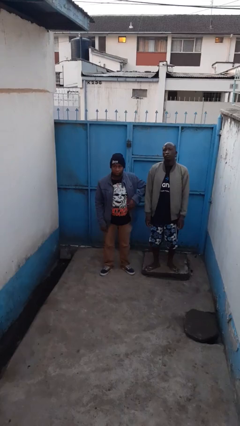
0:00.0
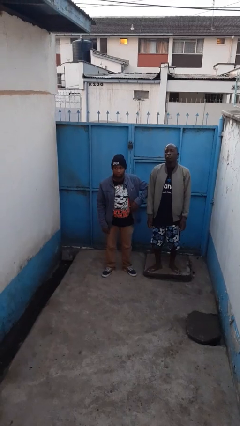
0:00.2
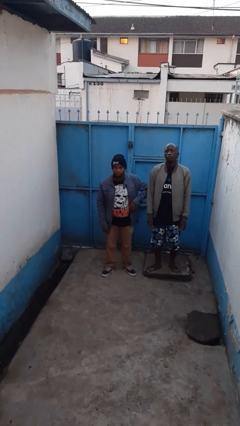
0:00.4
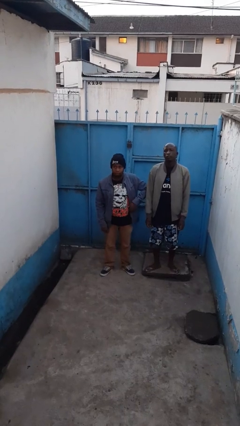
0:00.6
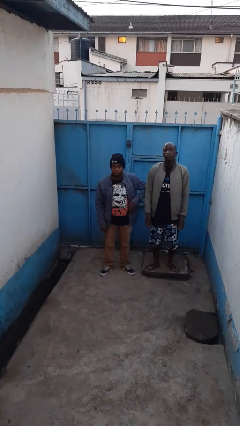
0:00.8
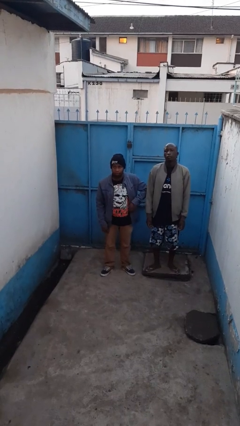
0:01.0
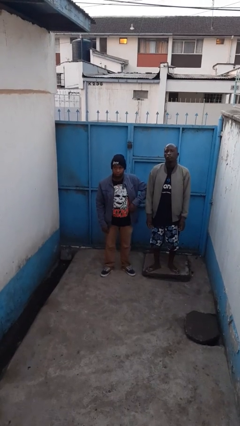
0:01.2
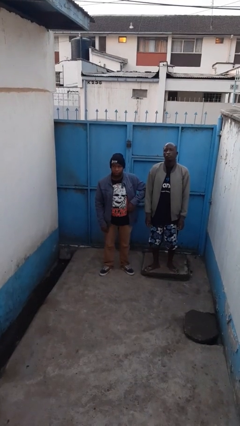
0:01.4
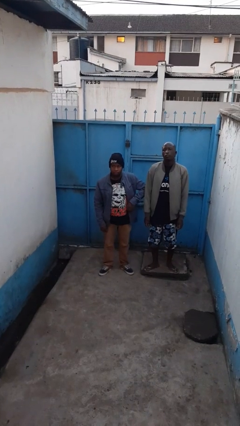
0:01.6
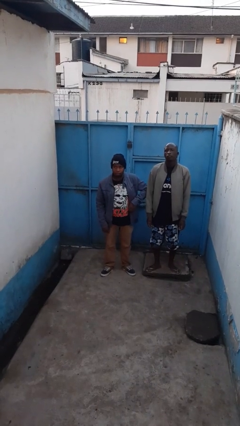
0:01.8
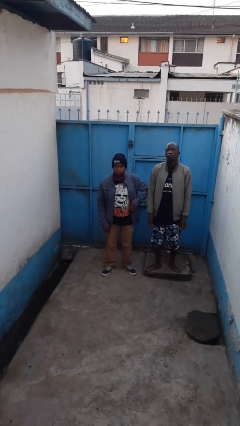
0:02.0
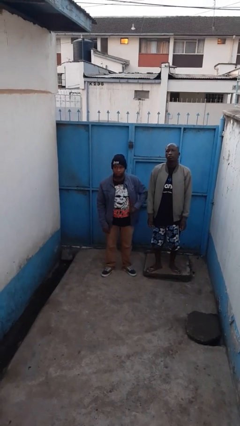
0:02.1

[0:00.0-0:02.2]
person nudges person with elbow

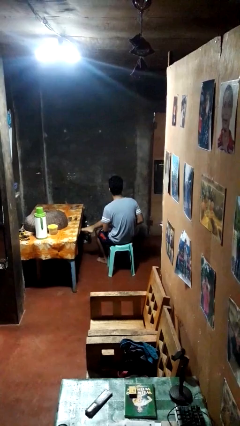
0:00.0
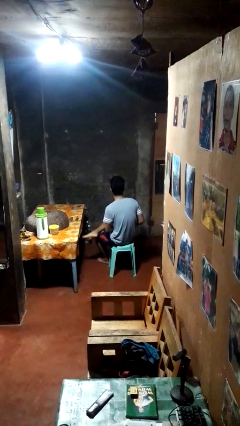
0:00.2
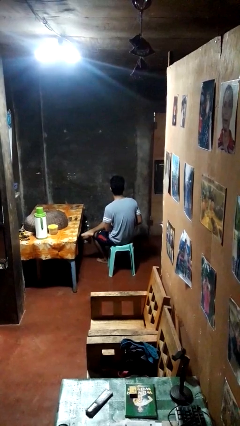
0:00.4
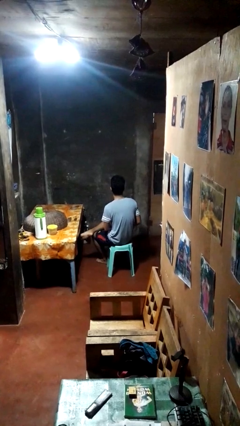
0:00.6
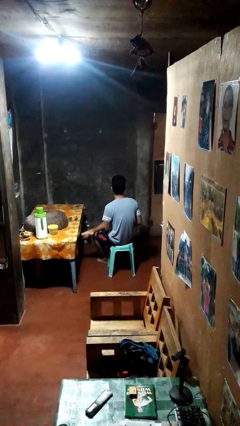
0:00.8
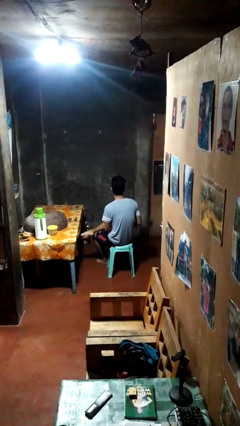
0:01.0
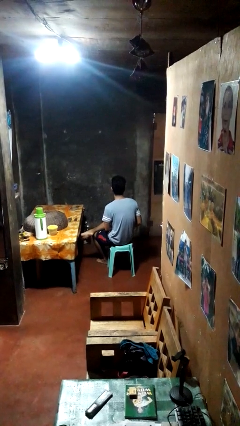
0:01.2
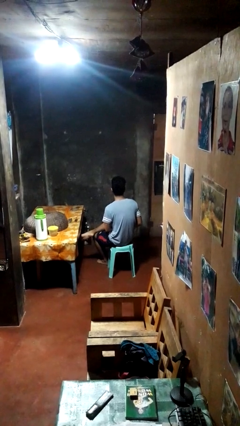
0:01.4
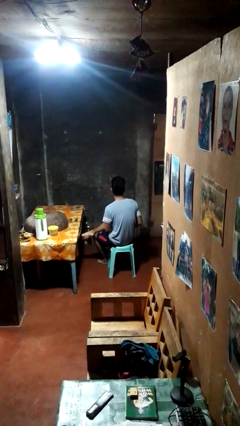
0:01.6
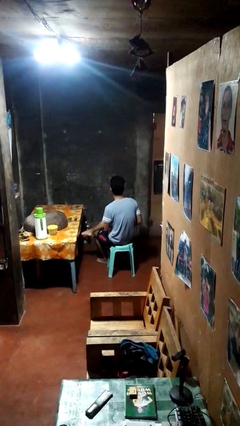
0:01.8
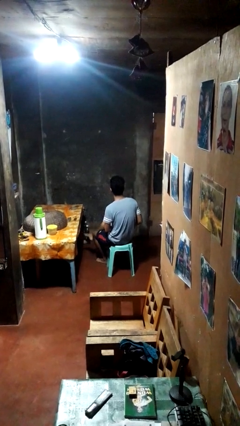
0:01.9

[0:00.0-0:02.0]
person crosses legs

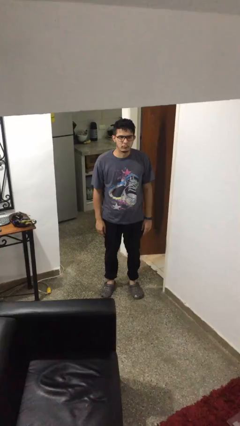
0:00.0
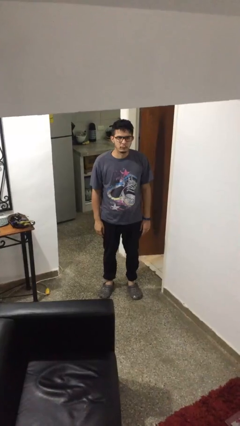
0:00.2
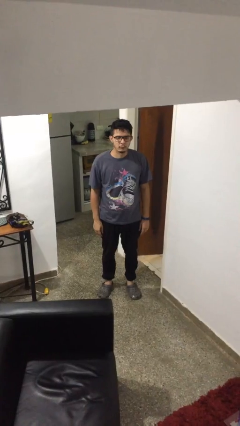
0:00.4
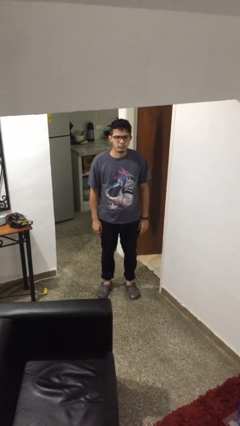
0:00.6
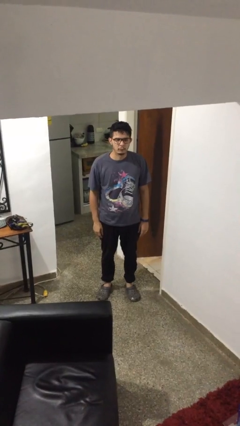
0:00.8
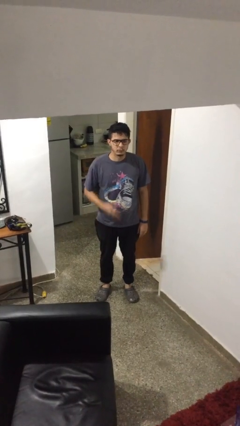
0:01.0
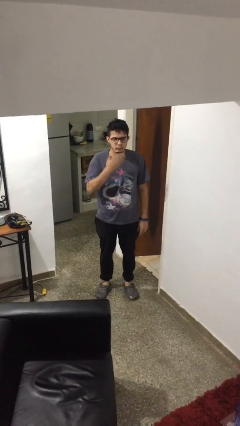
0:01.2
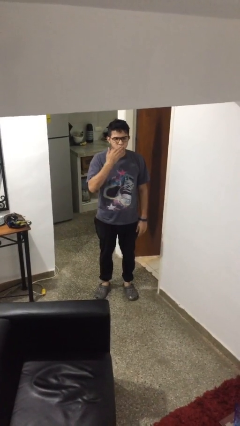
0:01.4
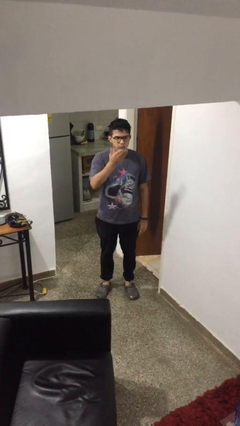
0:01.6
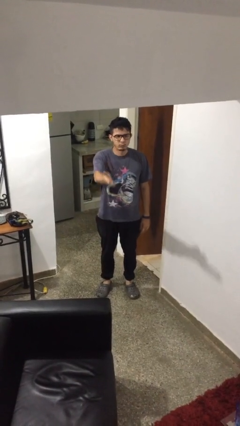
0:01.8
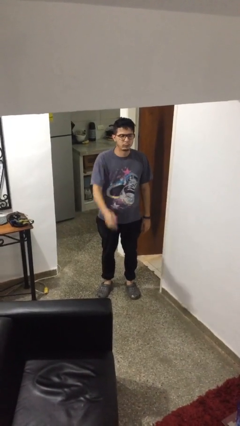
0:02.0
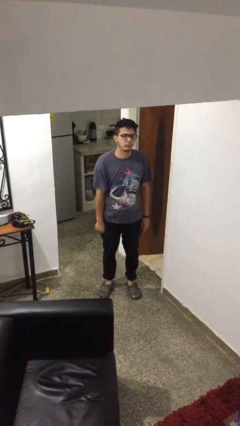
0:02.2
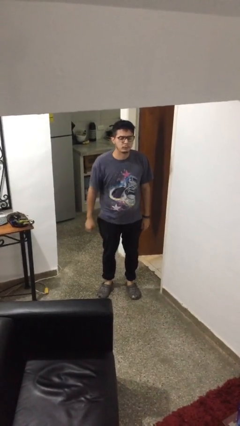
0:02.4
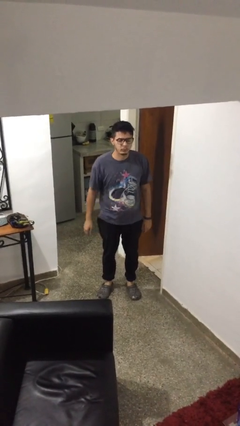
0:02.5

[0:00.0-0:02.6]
person gestures blow kiss

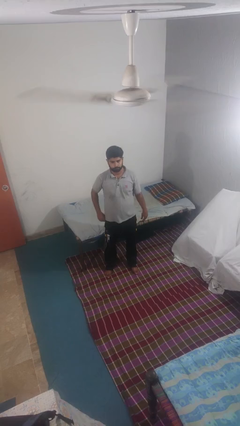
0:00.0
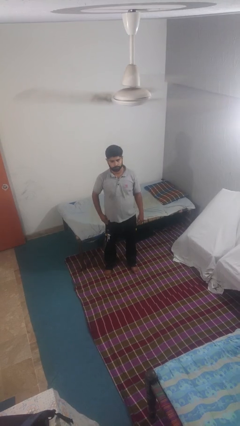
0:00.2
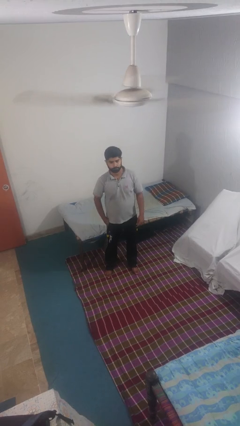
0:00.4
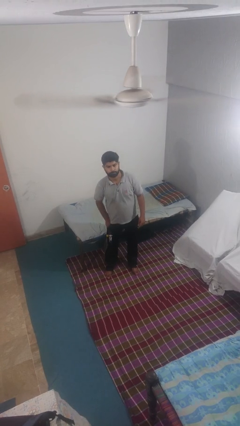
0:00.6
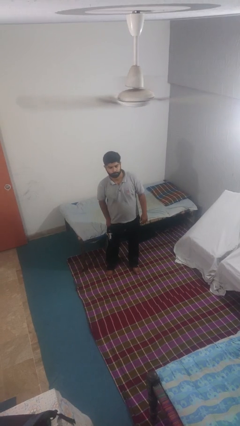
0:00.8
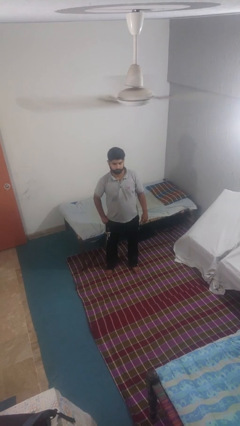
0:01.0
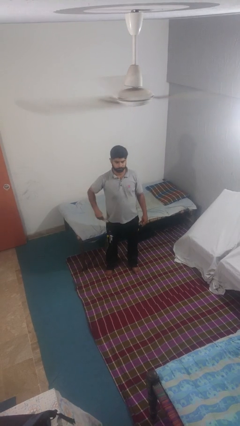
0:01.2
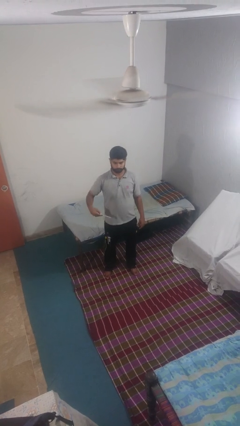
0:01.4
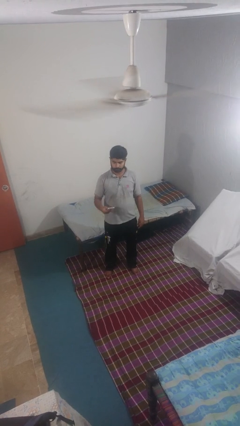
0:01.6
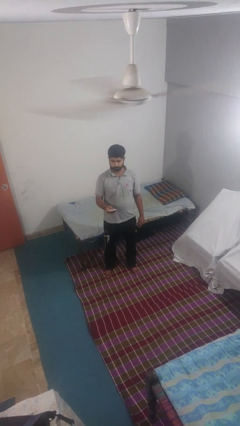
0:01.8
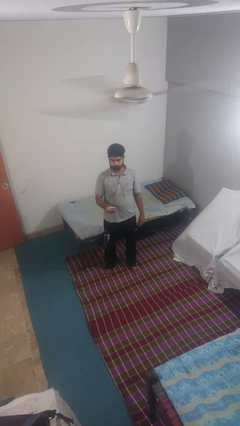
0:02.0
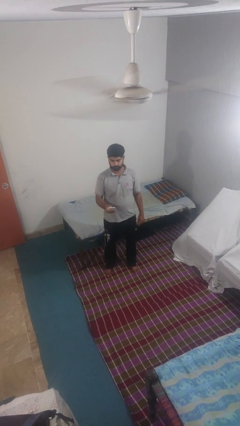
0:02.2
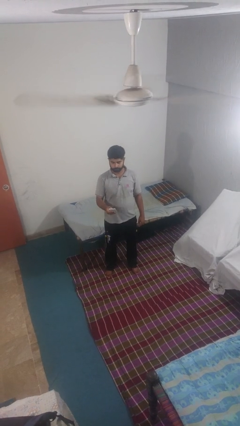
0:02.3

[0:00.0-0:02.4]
person takes phone from pocket

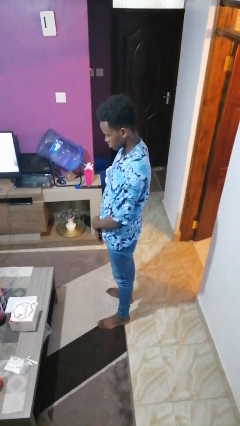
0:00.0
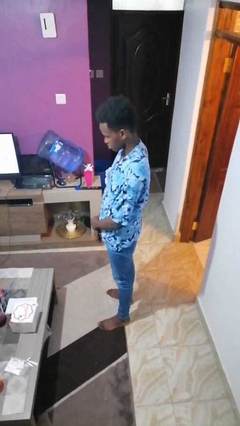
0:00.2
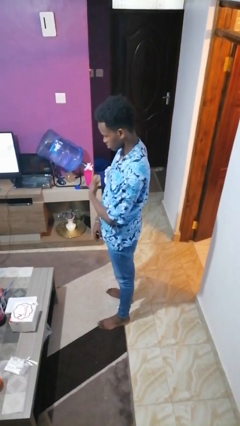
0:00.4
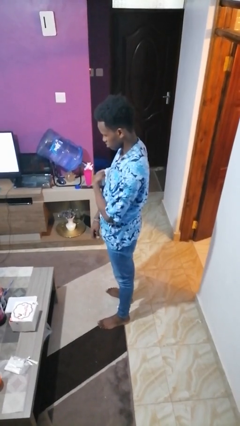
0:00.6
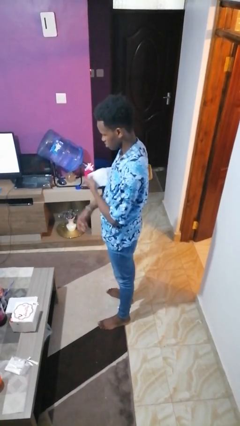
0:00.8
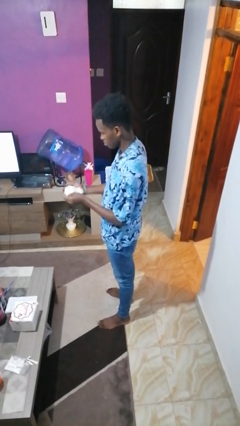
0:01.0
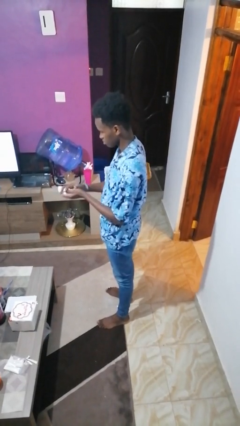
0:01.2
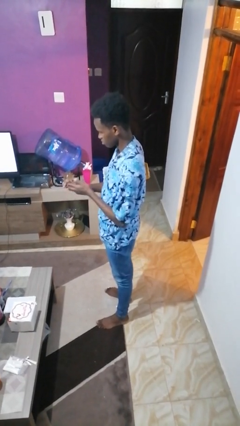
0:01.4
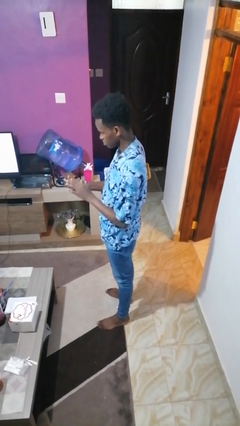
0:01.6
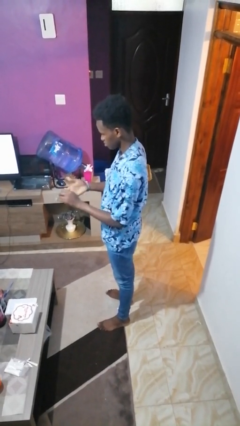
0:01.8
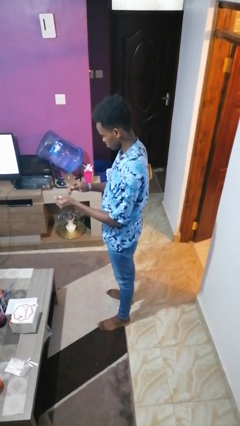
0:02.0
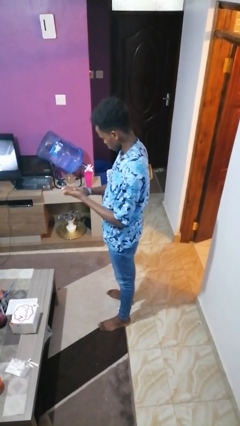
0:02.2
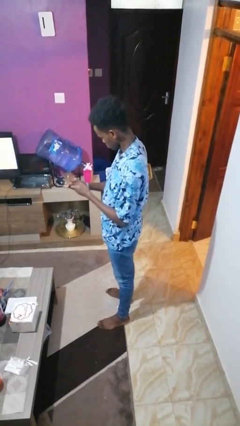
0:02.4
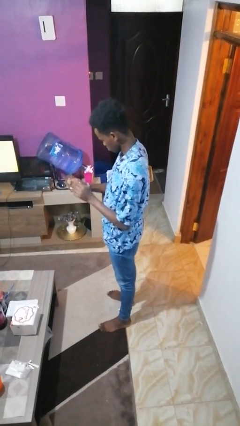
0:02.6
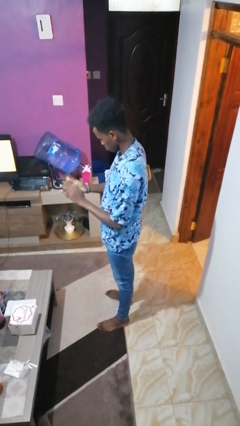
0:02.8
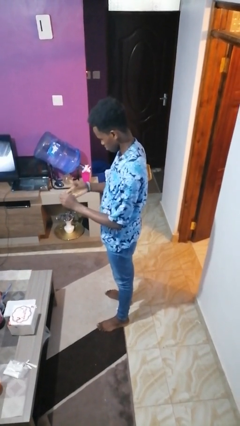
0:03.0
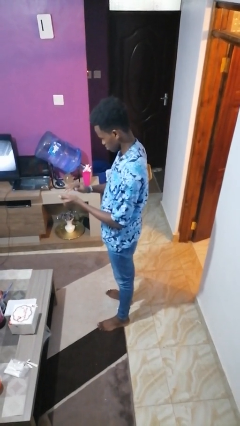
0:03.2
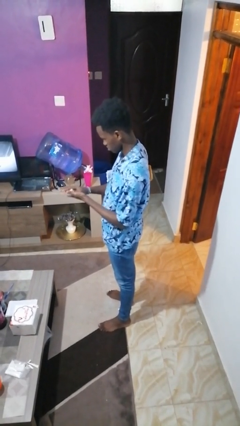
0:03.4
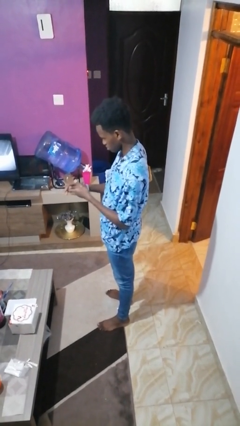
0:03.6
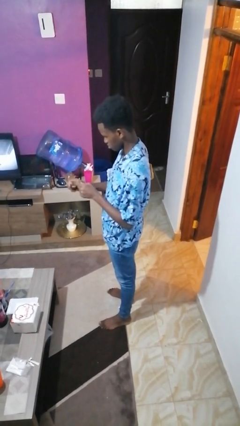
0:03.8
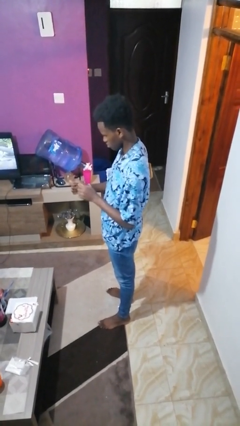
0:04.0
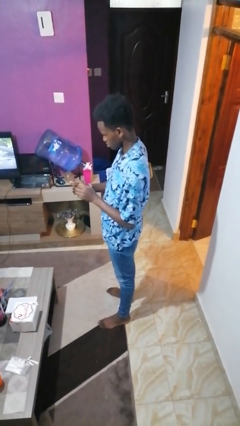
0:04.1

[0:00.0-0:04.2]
person crumples paper

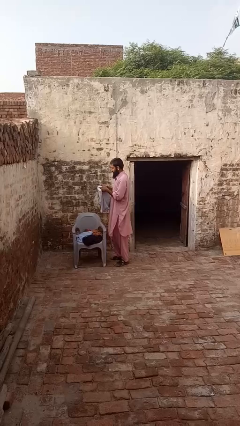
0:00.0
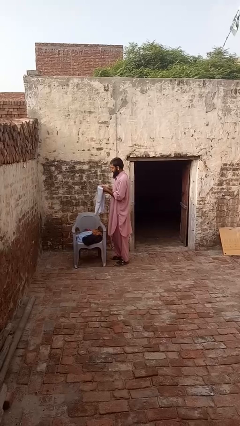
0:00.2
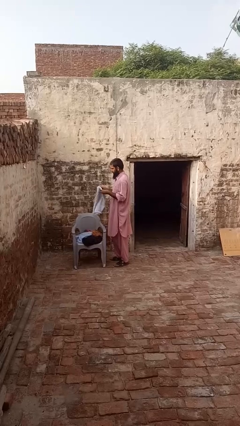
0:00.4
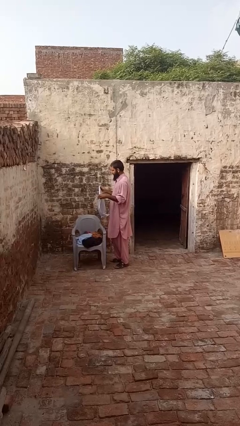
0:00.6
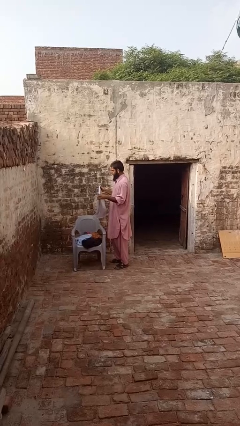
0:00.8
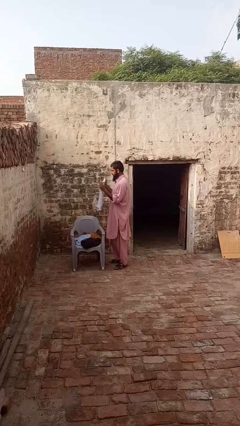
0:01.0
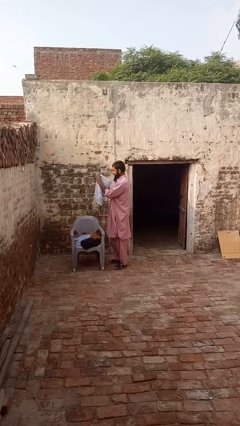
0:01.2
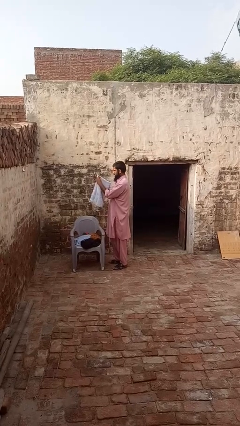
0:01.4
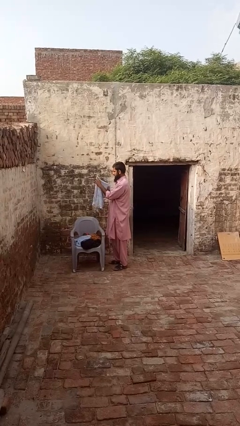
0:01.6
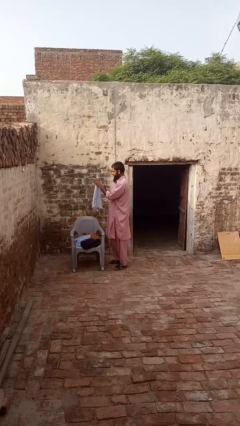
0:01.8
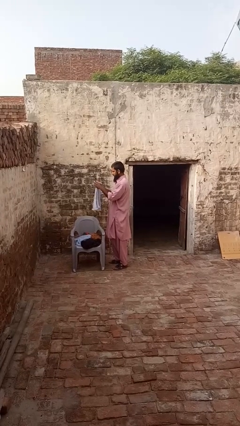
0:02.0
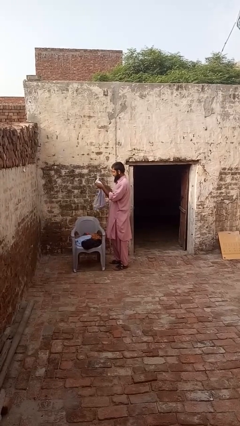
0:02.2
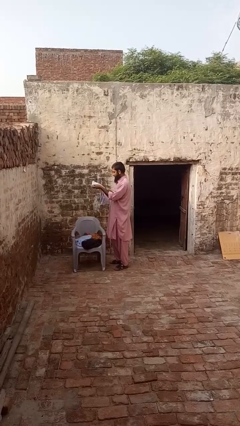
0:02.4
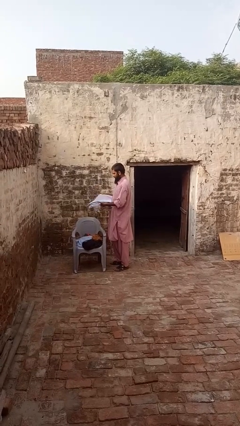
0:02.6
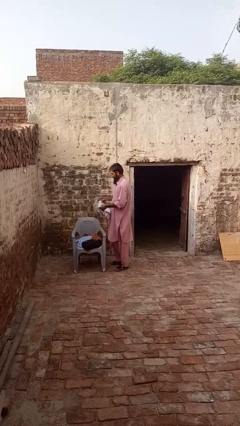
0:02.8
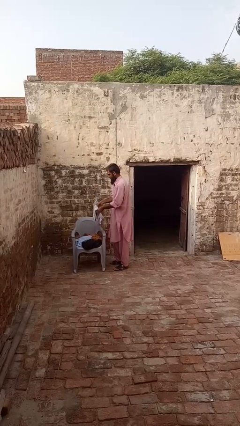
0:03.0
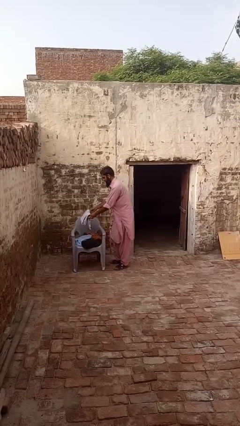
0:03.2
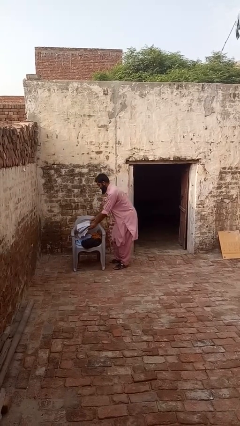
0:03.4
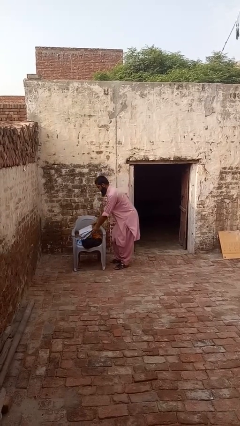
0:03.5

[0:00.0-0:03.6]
person folds towel

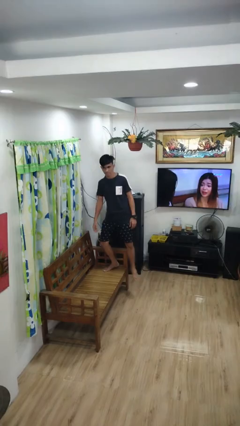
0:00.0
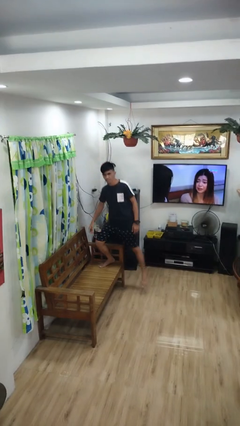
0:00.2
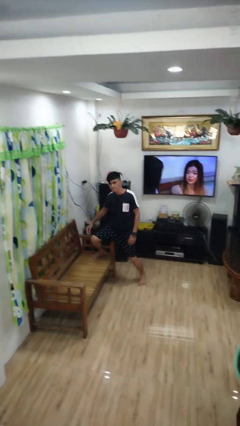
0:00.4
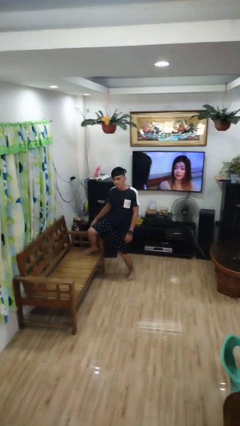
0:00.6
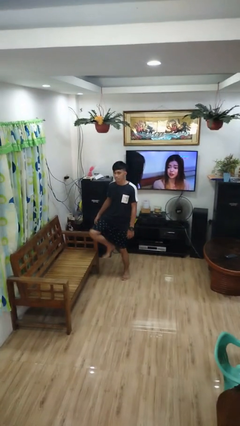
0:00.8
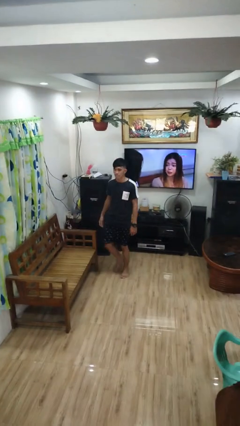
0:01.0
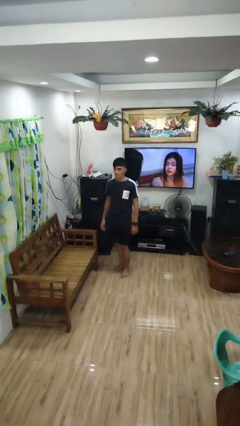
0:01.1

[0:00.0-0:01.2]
person climbs off couch
